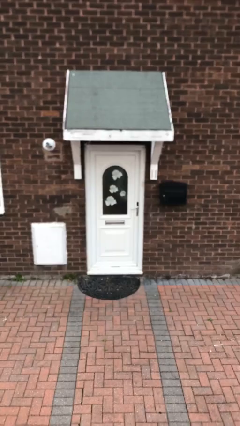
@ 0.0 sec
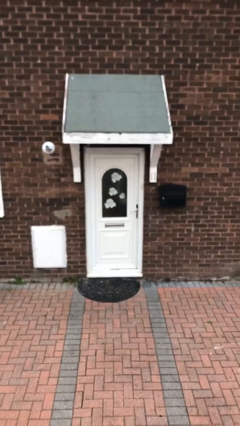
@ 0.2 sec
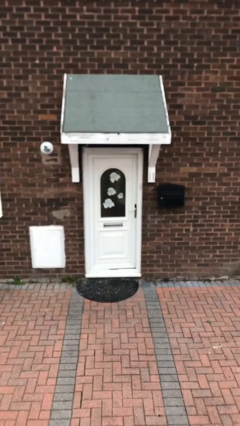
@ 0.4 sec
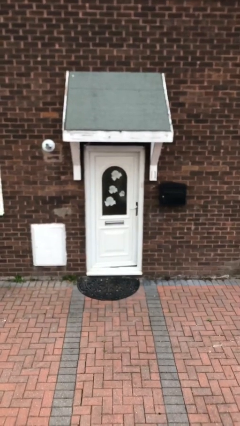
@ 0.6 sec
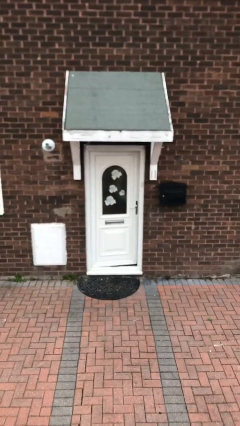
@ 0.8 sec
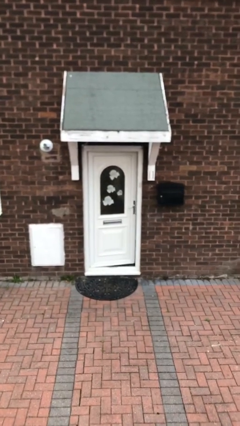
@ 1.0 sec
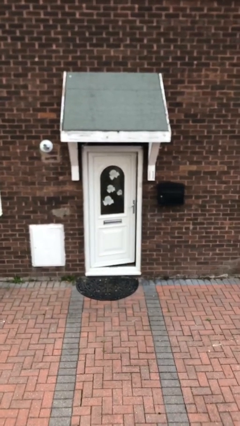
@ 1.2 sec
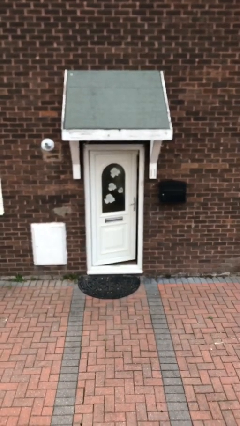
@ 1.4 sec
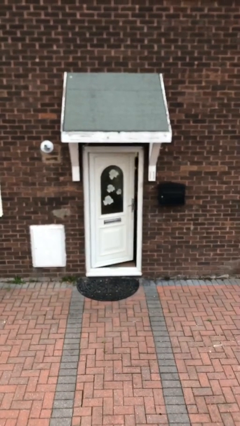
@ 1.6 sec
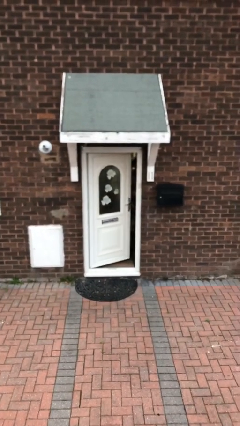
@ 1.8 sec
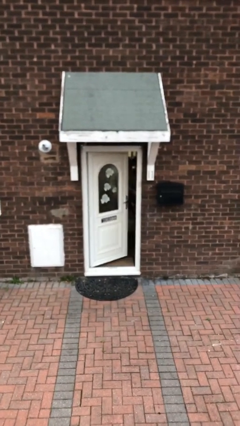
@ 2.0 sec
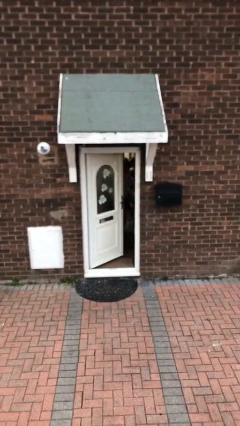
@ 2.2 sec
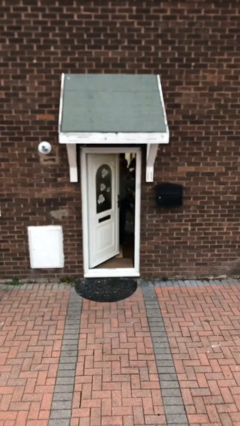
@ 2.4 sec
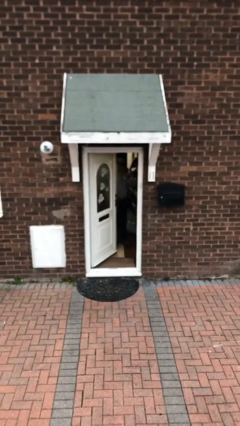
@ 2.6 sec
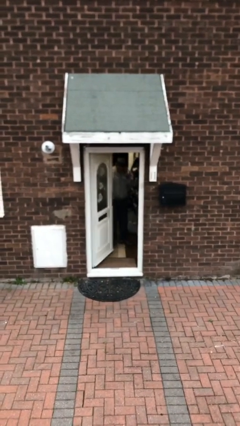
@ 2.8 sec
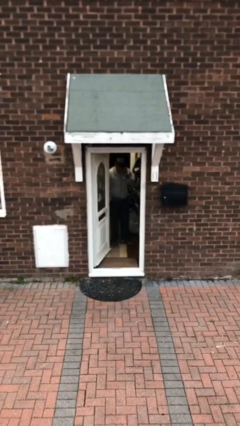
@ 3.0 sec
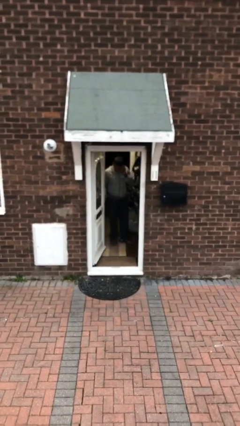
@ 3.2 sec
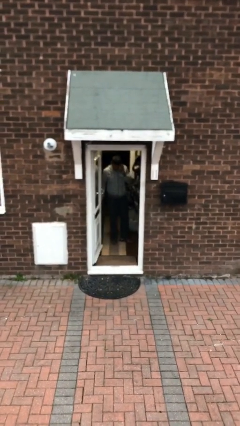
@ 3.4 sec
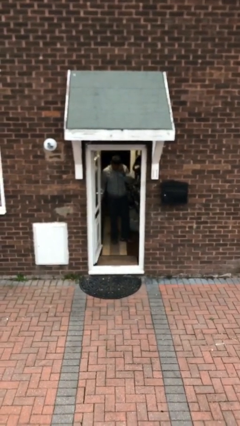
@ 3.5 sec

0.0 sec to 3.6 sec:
person opens facility door

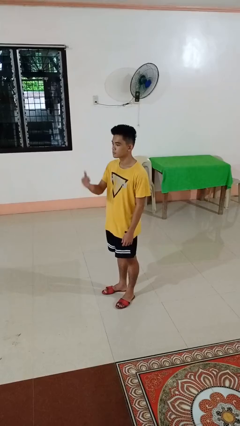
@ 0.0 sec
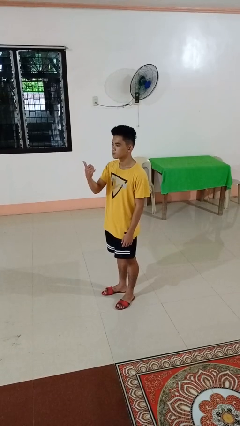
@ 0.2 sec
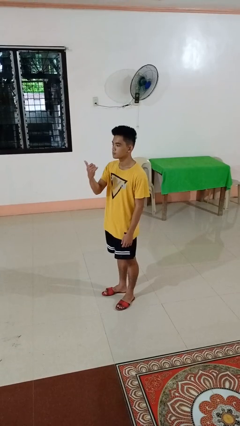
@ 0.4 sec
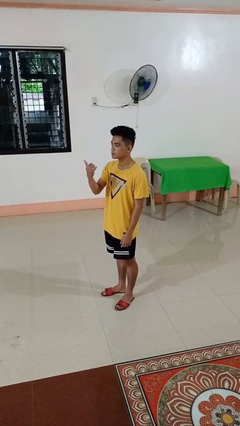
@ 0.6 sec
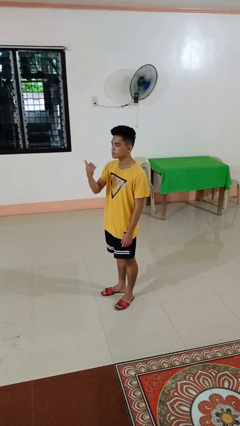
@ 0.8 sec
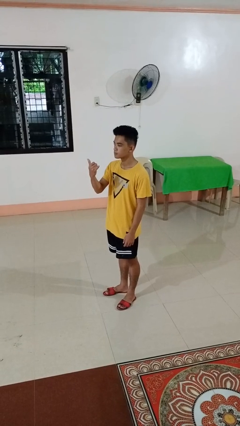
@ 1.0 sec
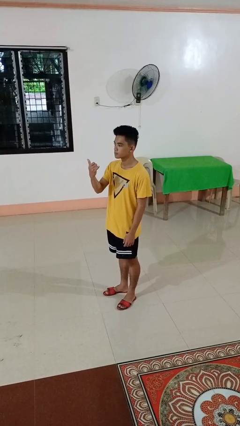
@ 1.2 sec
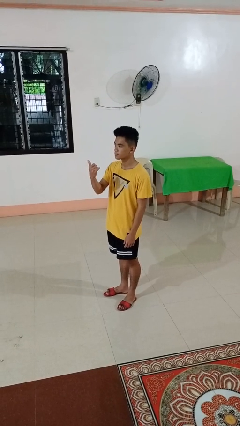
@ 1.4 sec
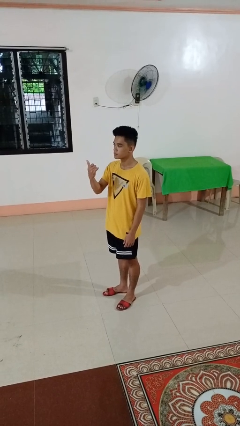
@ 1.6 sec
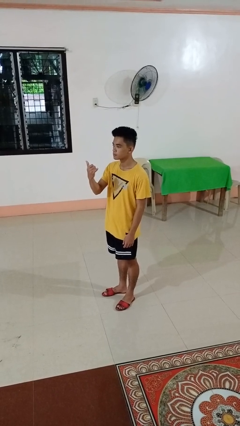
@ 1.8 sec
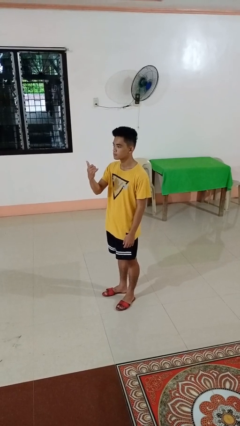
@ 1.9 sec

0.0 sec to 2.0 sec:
person gestures hang loose

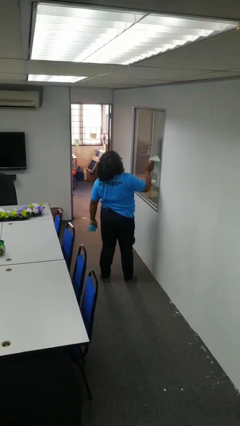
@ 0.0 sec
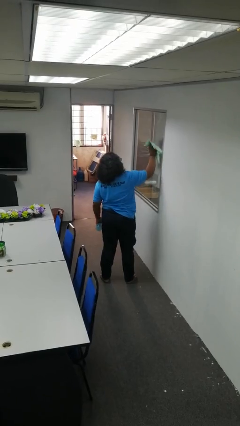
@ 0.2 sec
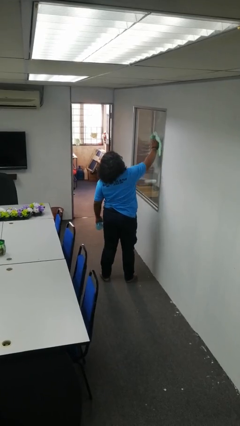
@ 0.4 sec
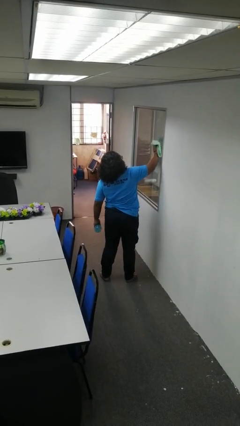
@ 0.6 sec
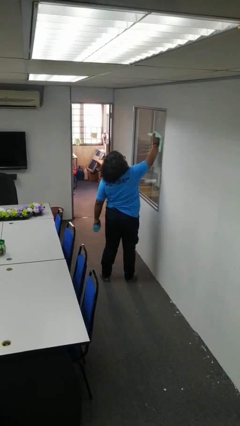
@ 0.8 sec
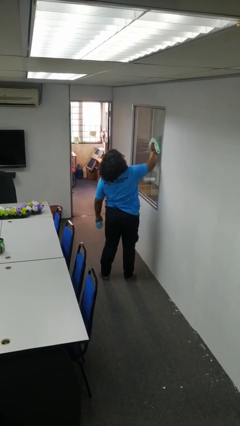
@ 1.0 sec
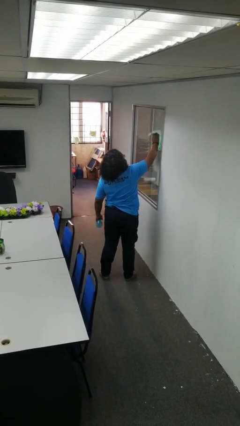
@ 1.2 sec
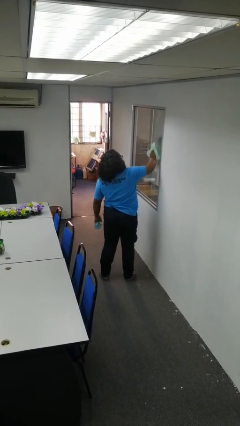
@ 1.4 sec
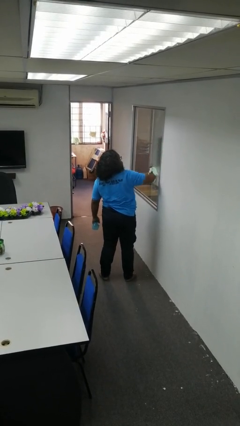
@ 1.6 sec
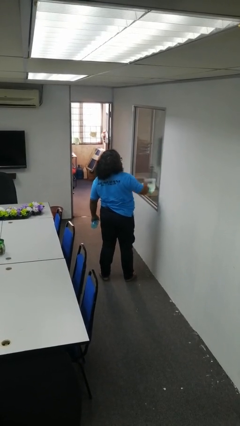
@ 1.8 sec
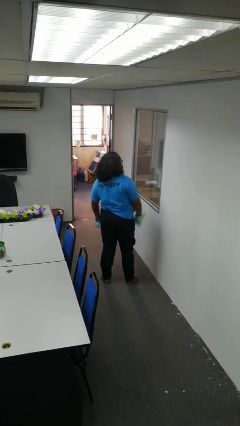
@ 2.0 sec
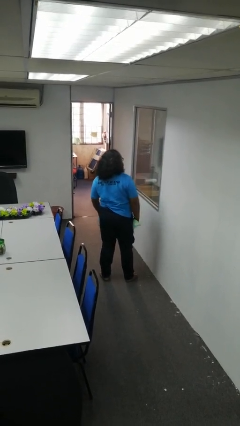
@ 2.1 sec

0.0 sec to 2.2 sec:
person washes window

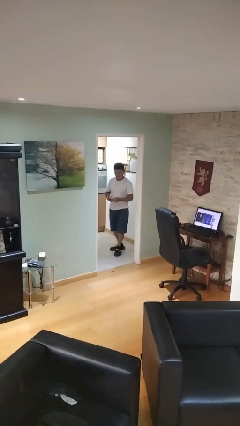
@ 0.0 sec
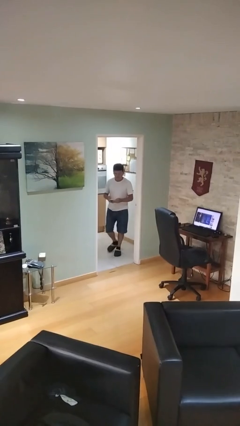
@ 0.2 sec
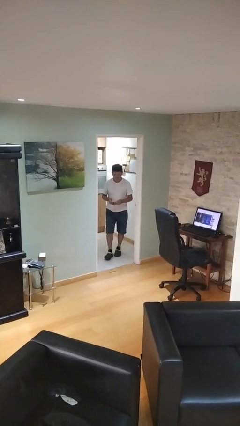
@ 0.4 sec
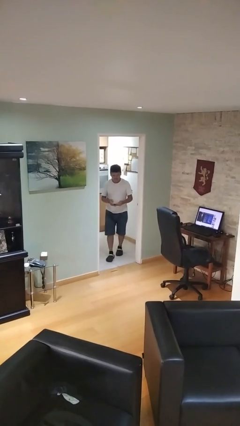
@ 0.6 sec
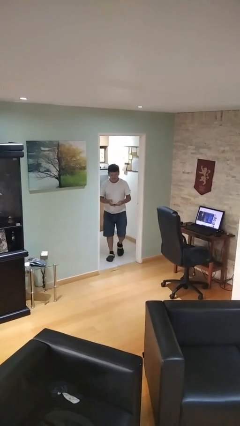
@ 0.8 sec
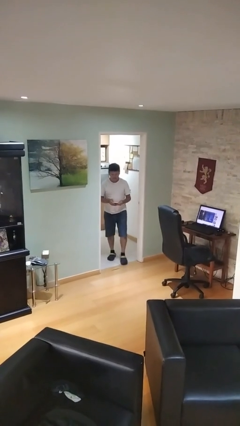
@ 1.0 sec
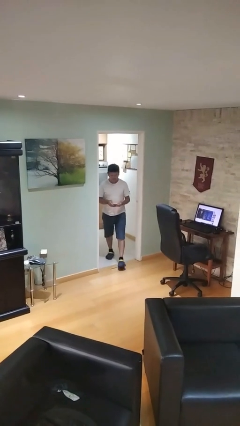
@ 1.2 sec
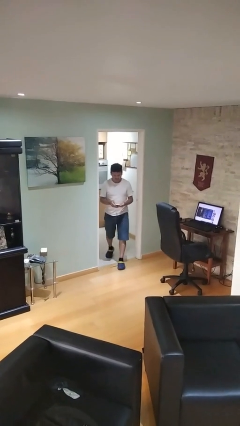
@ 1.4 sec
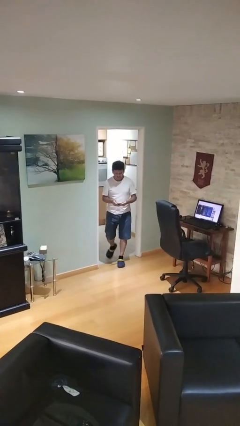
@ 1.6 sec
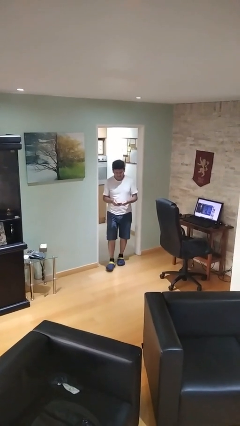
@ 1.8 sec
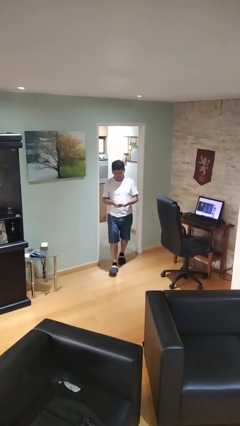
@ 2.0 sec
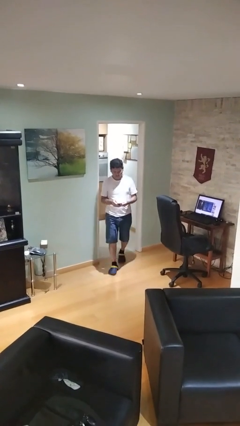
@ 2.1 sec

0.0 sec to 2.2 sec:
person enters scene through structure

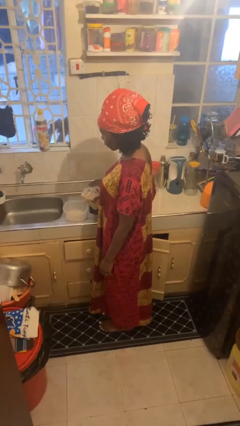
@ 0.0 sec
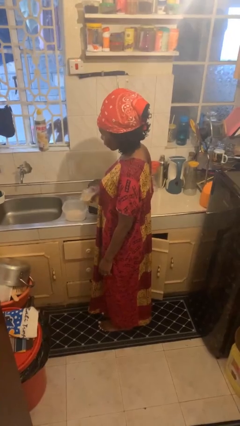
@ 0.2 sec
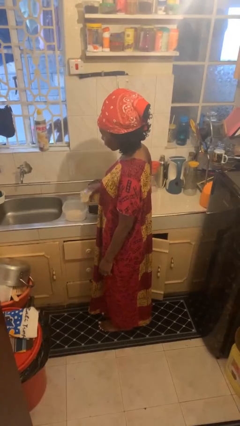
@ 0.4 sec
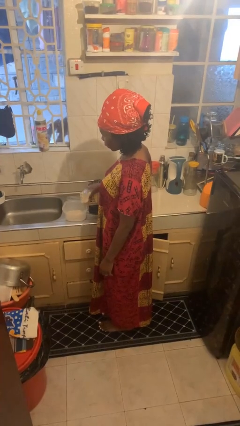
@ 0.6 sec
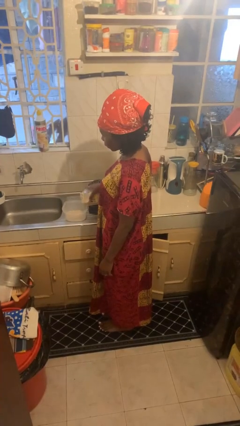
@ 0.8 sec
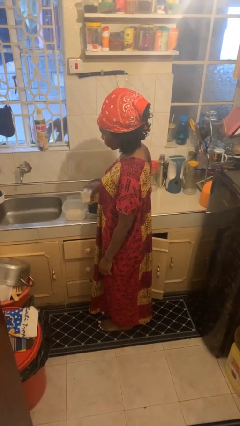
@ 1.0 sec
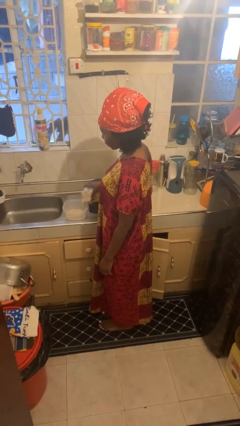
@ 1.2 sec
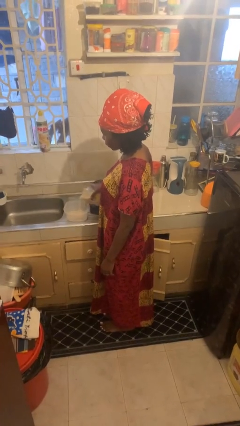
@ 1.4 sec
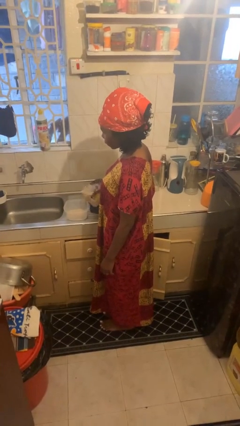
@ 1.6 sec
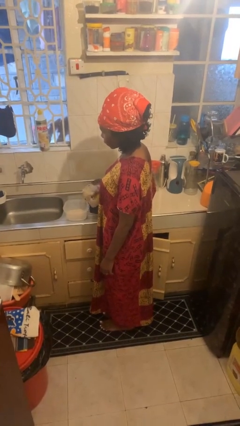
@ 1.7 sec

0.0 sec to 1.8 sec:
person pours into bowl

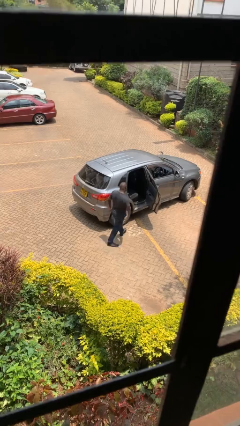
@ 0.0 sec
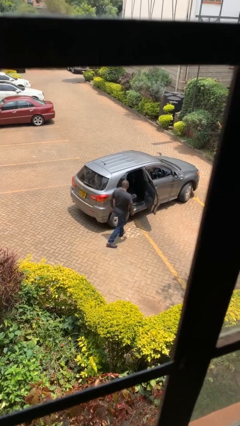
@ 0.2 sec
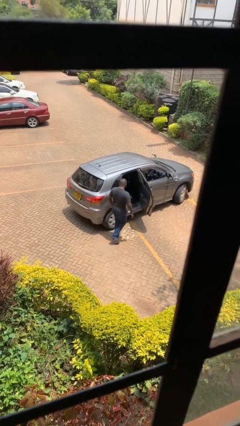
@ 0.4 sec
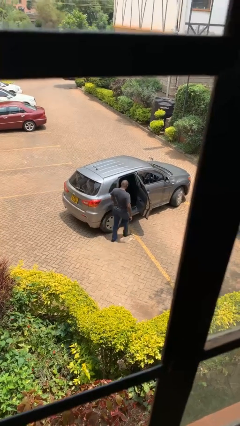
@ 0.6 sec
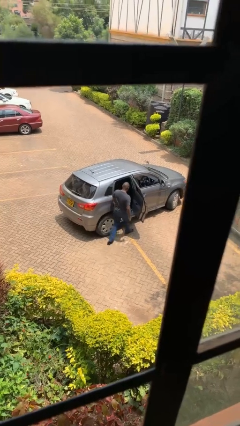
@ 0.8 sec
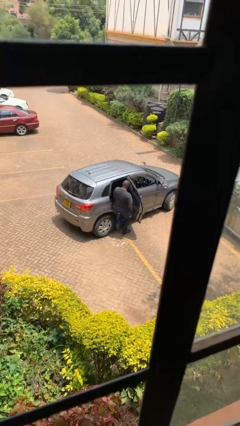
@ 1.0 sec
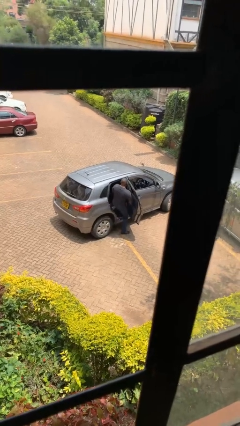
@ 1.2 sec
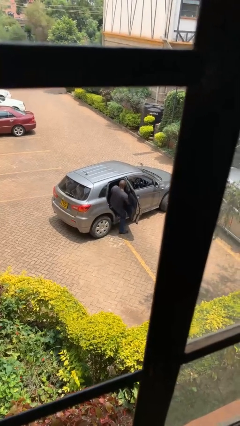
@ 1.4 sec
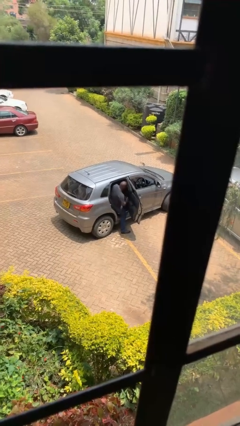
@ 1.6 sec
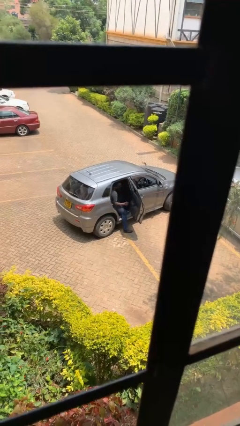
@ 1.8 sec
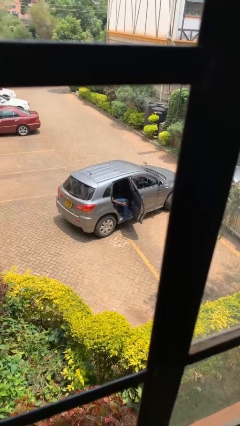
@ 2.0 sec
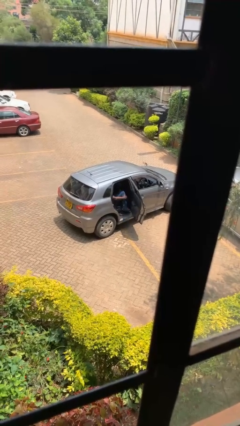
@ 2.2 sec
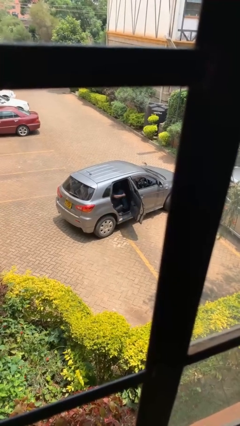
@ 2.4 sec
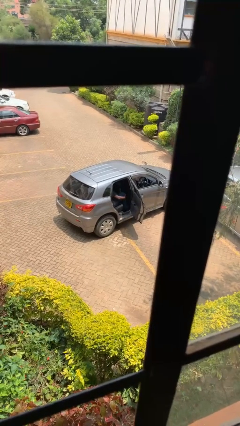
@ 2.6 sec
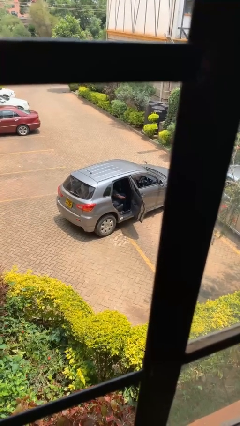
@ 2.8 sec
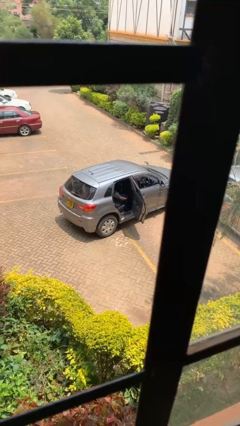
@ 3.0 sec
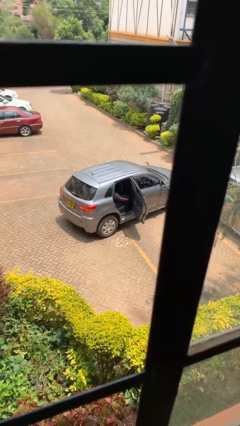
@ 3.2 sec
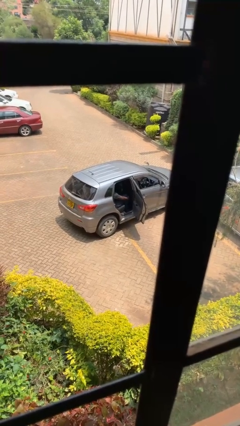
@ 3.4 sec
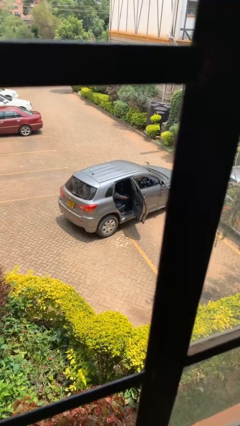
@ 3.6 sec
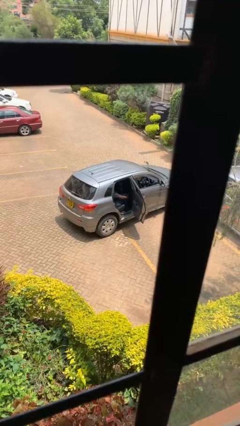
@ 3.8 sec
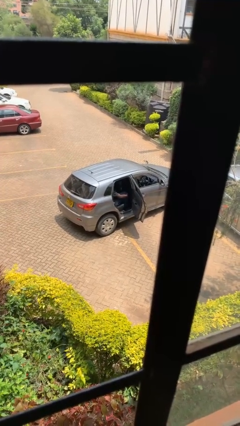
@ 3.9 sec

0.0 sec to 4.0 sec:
person enters car

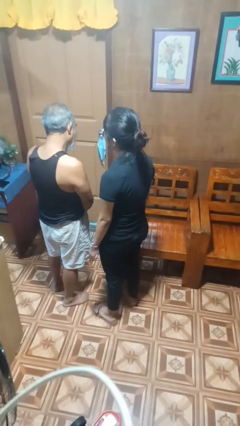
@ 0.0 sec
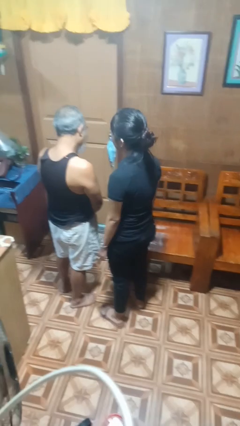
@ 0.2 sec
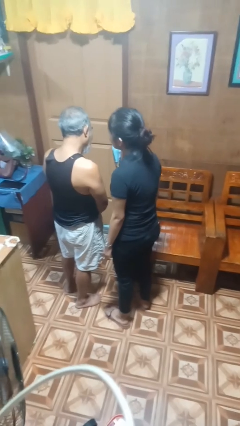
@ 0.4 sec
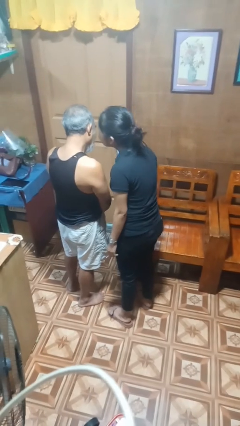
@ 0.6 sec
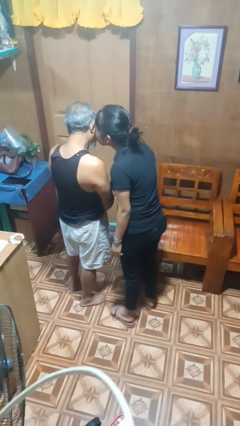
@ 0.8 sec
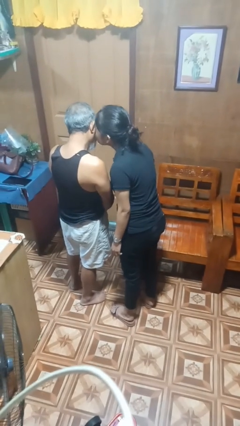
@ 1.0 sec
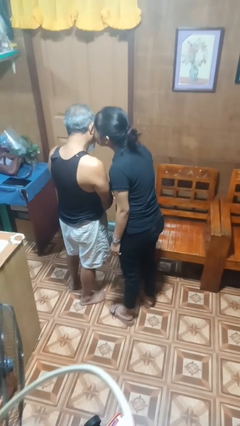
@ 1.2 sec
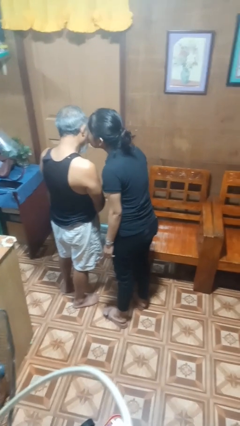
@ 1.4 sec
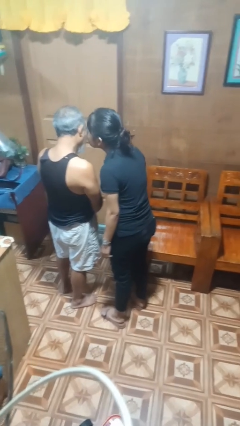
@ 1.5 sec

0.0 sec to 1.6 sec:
person kisses cheek of person
